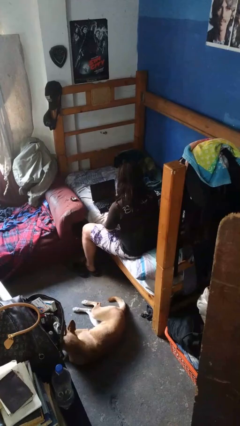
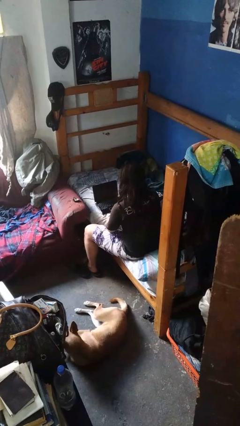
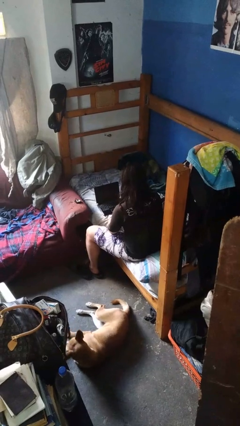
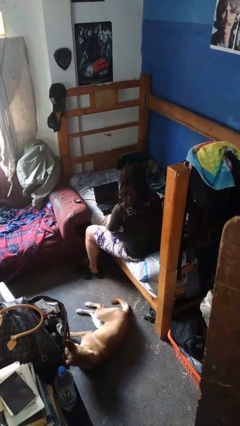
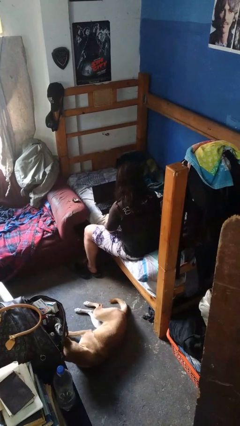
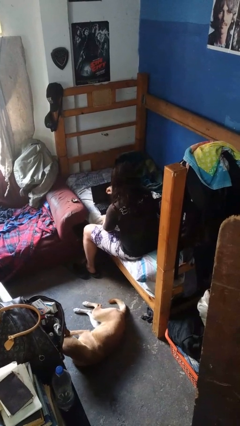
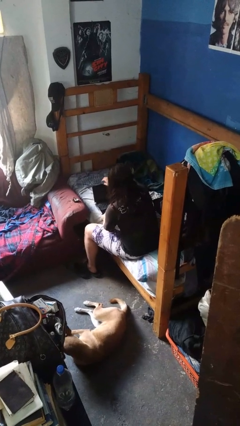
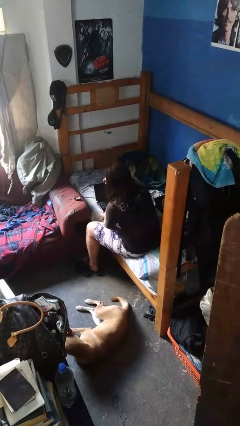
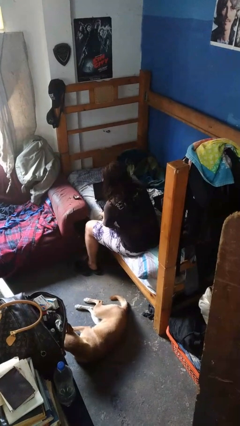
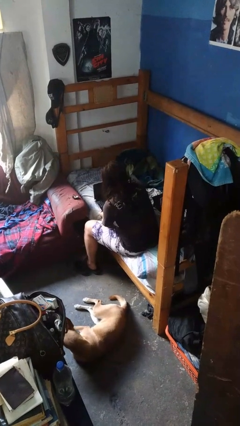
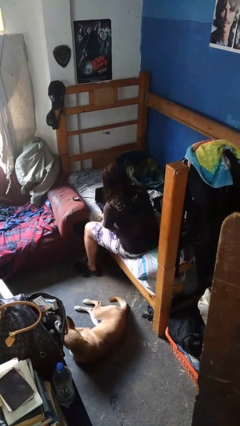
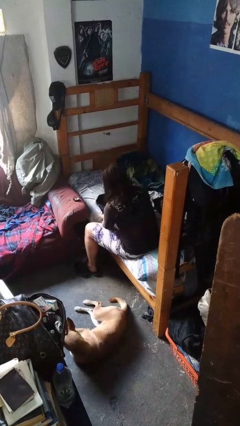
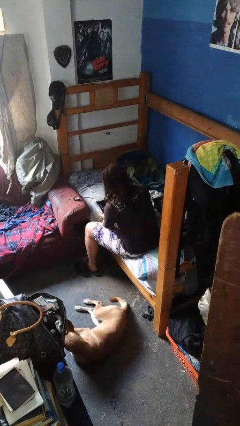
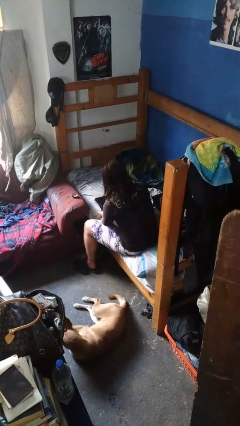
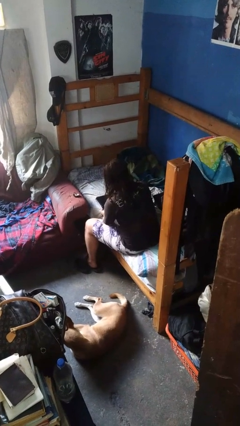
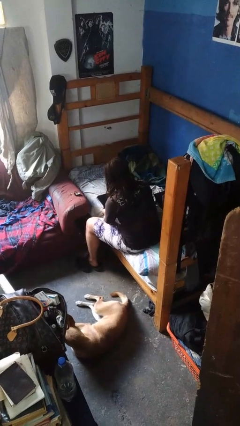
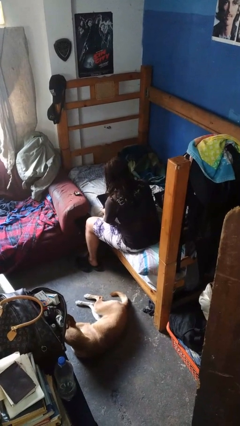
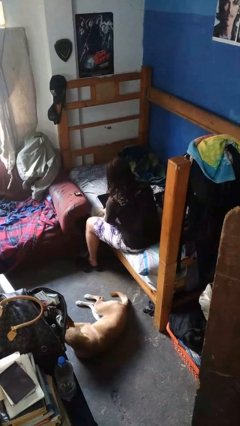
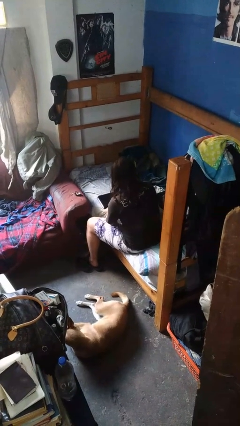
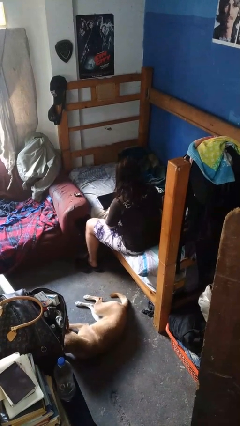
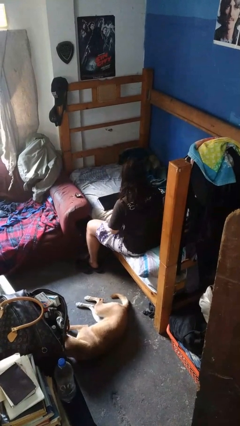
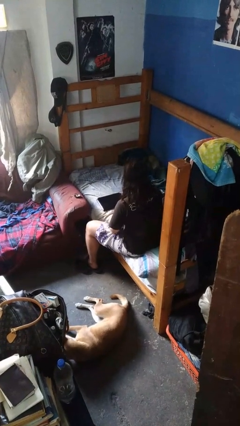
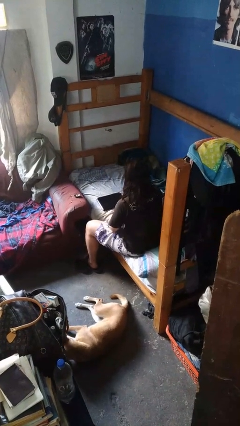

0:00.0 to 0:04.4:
person closes laptop

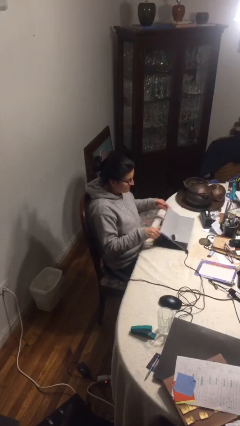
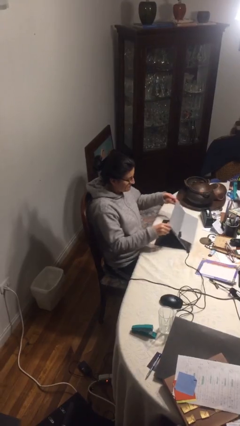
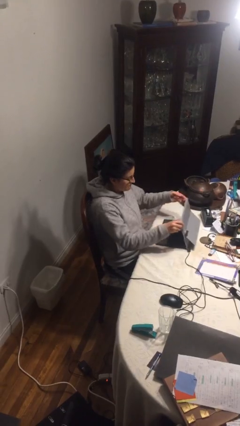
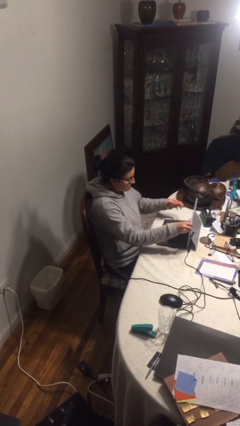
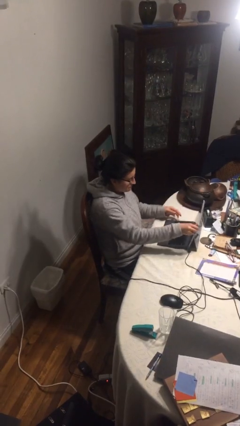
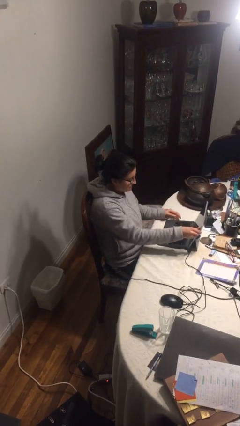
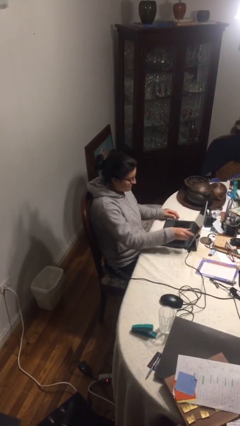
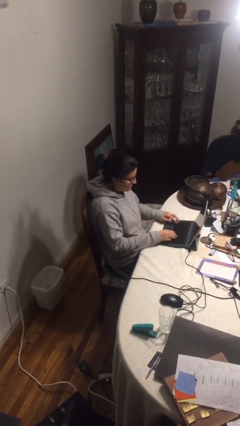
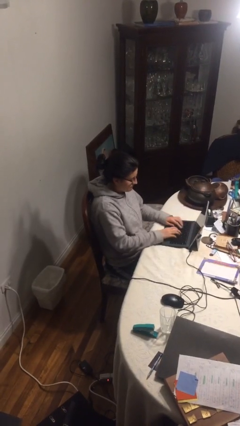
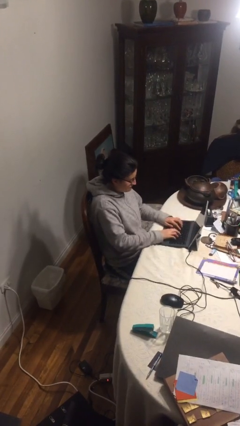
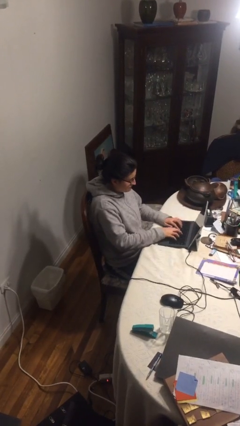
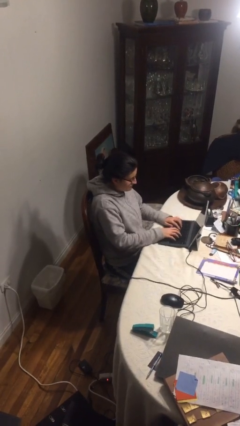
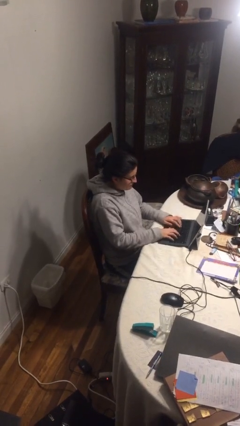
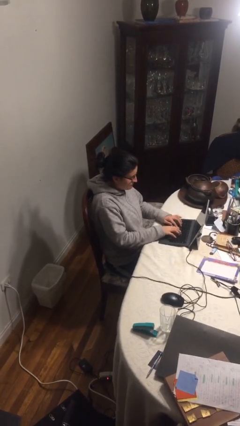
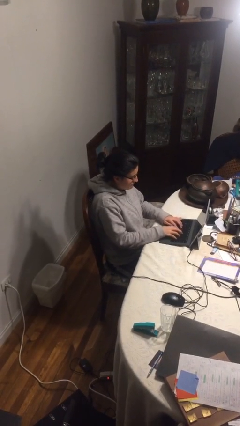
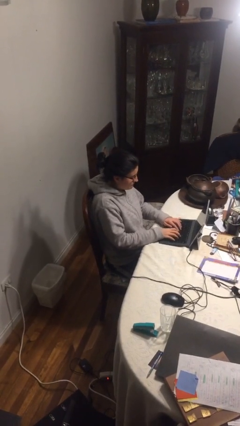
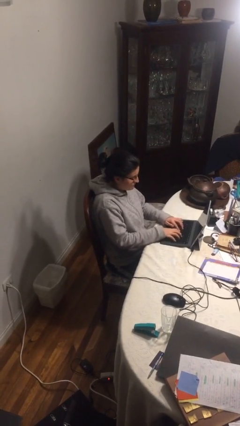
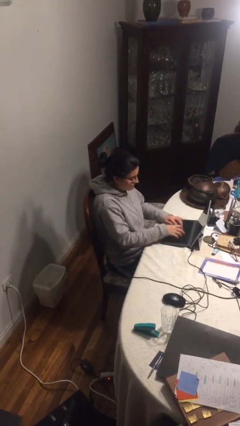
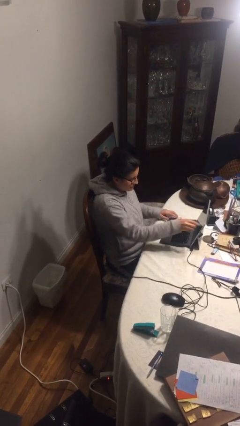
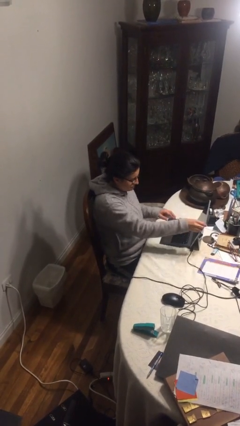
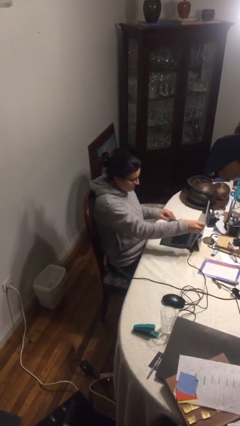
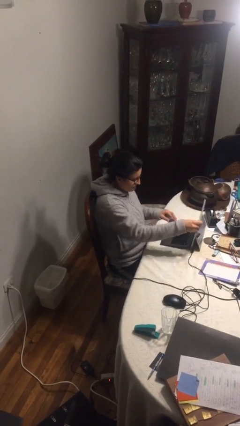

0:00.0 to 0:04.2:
person interacts with laptop

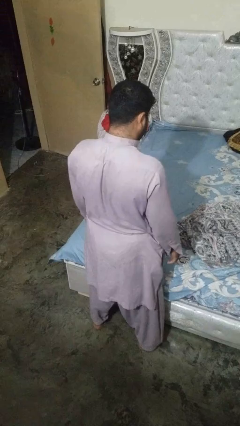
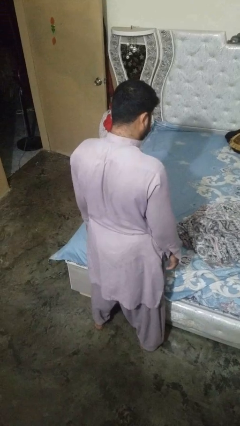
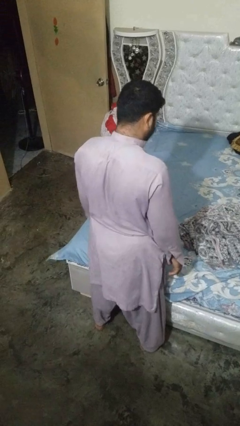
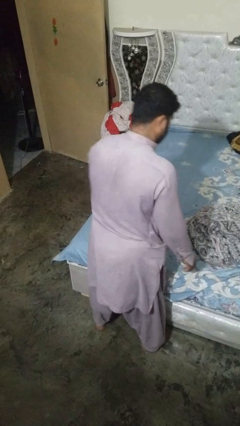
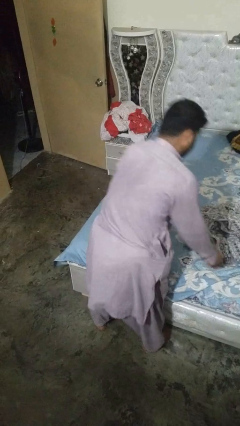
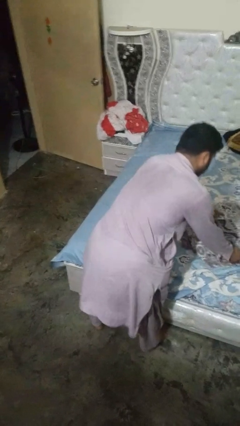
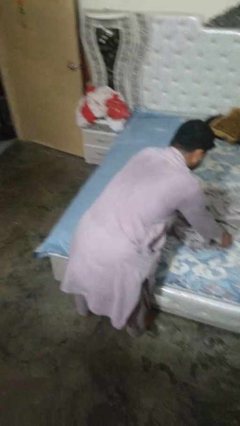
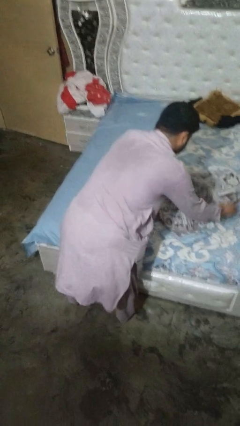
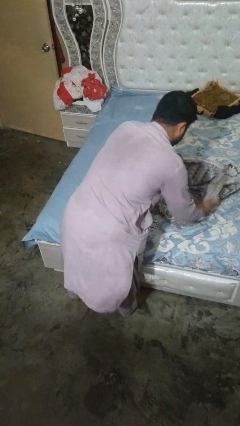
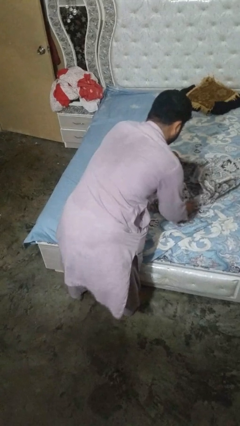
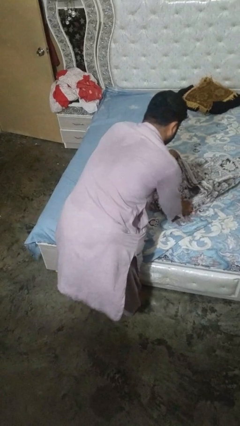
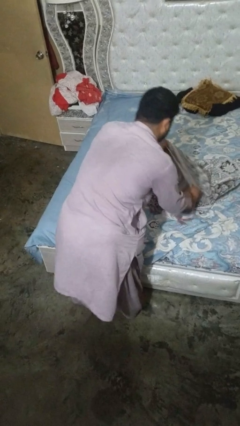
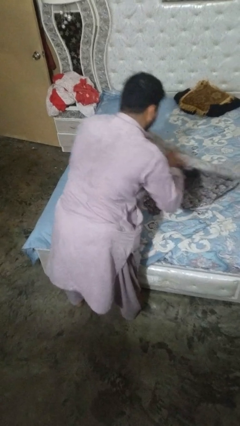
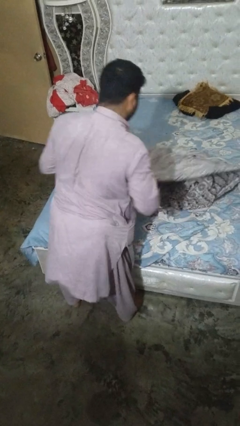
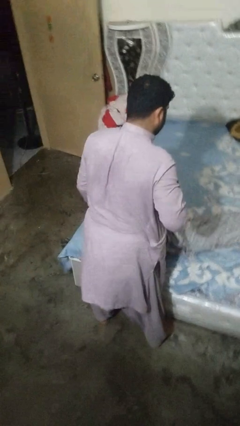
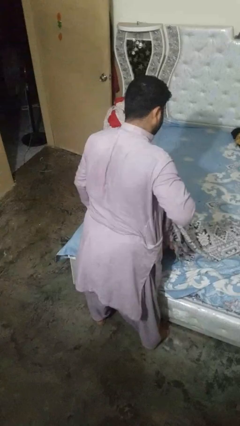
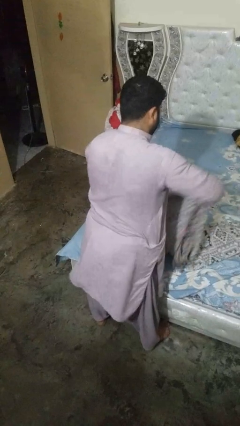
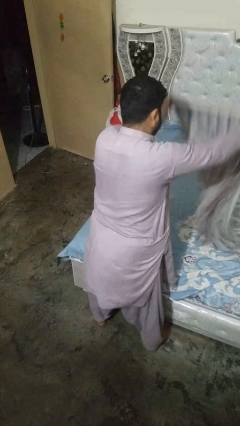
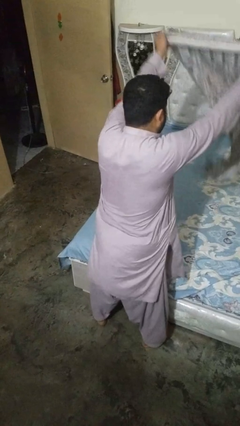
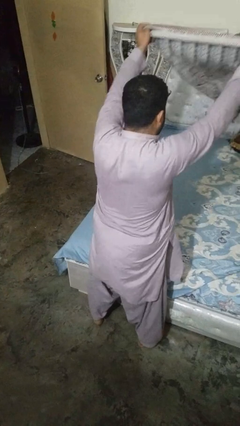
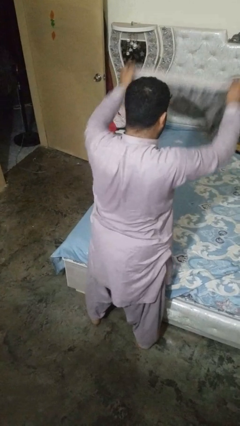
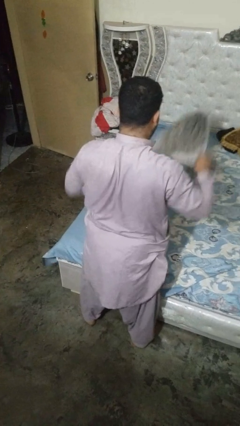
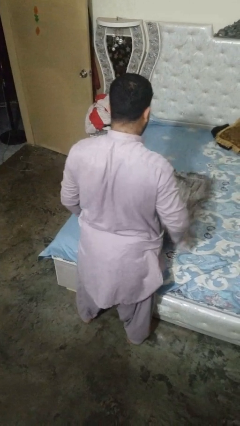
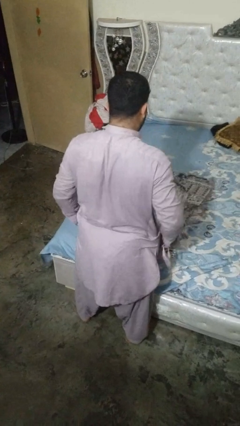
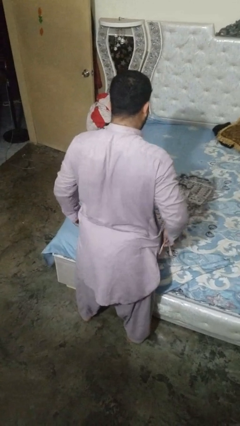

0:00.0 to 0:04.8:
person folds blanket

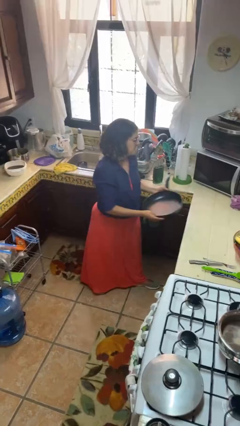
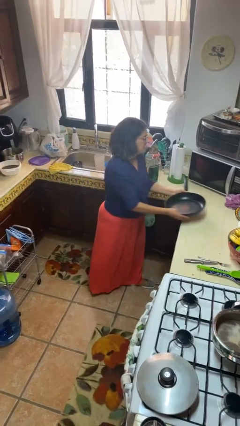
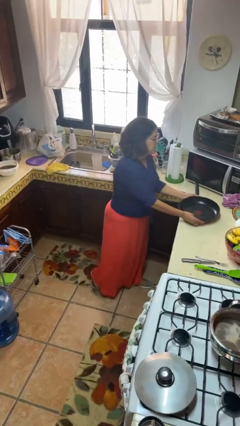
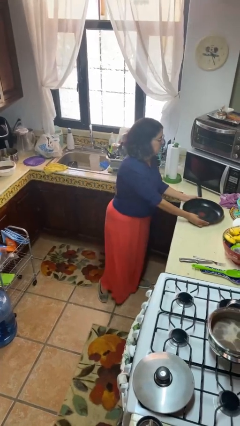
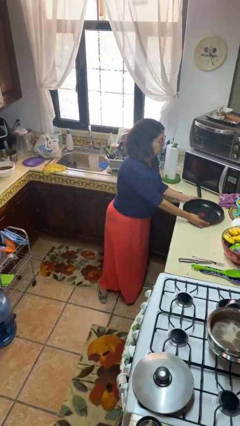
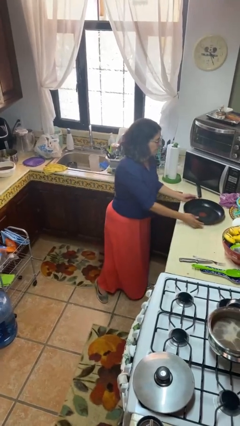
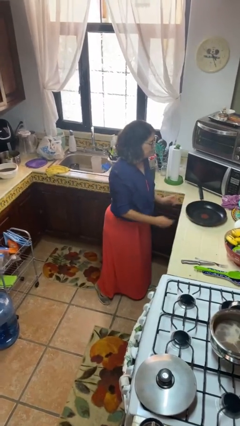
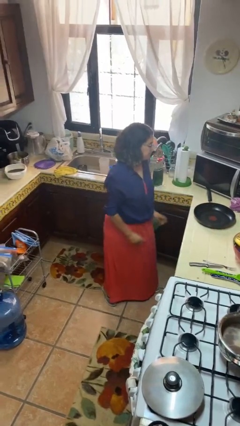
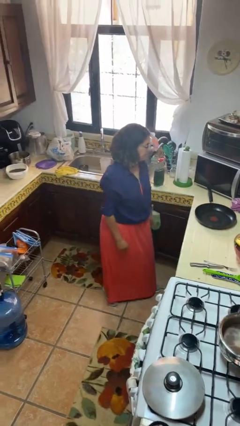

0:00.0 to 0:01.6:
person puts down object on countertop

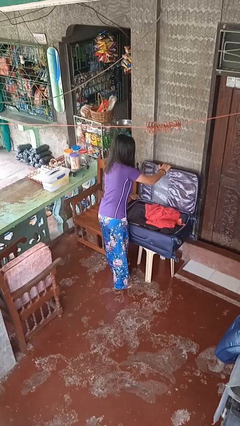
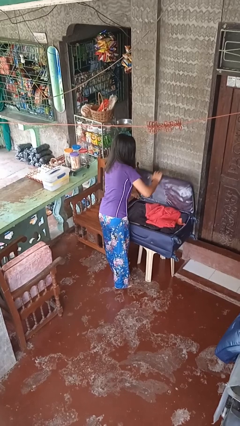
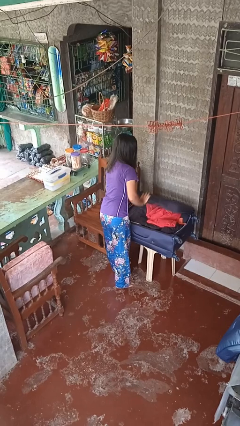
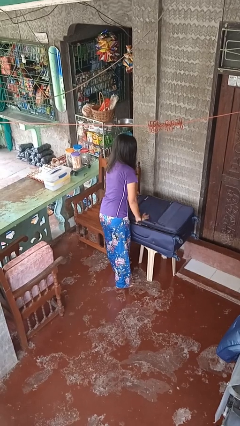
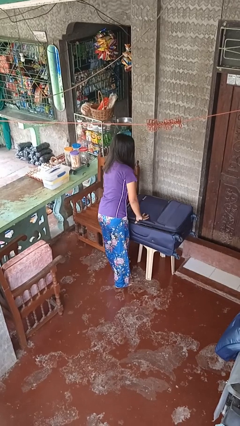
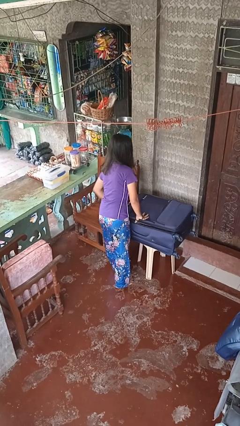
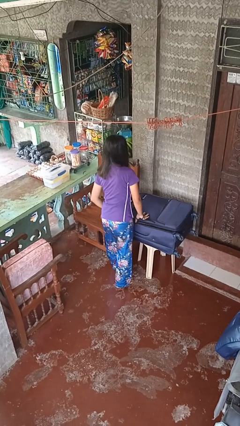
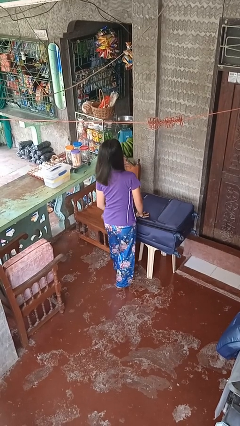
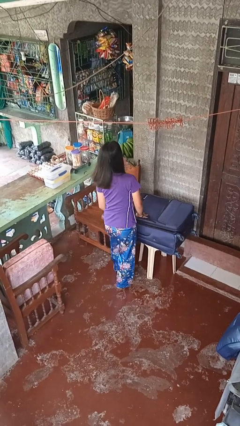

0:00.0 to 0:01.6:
person closes suitcase

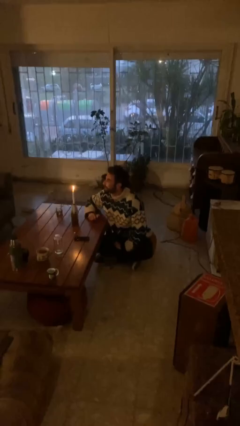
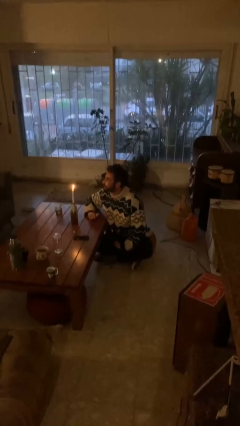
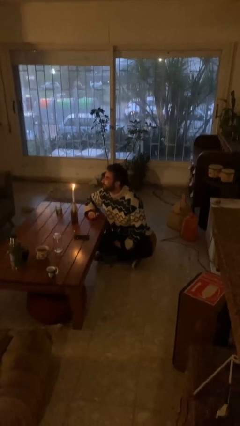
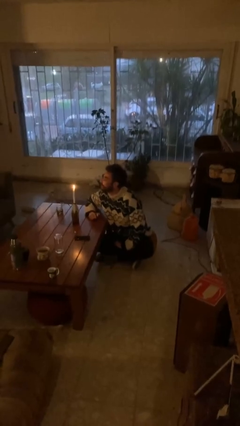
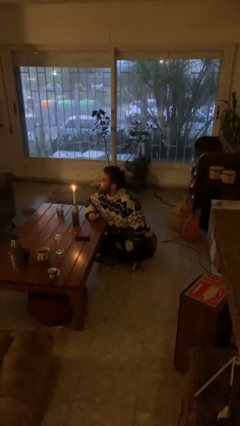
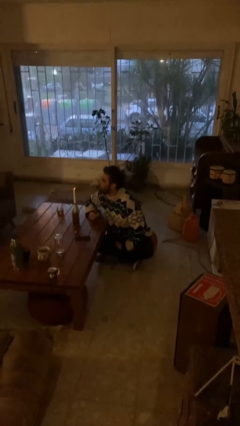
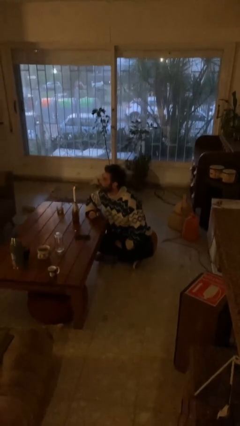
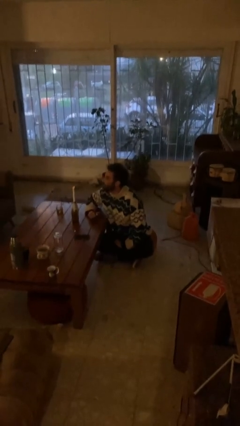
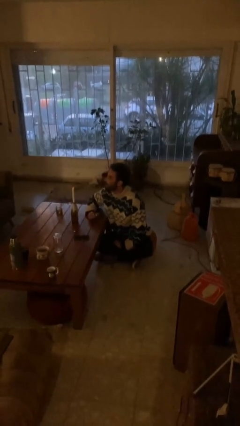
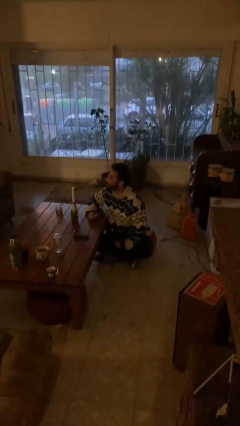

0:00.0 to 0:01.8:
person extinguishes candle
